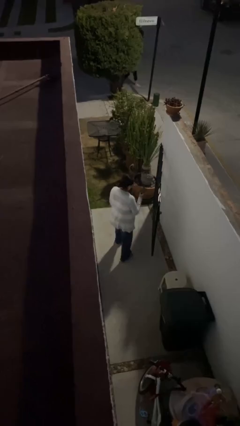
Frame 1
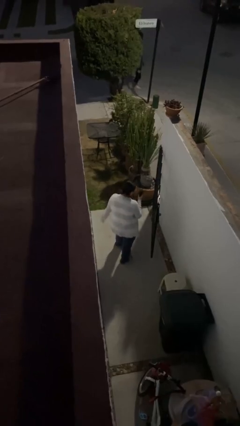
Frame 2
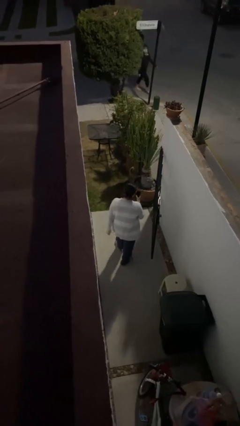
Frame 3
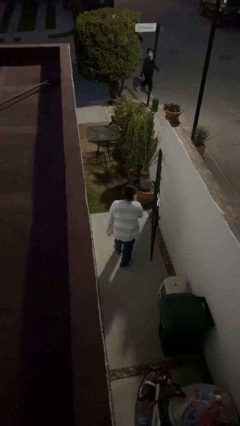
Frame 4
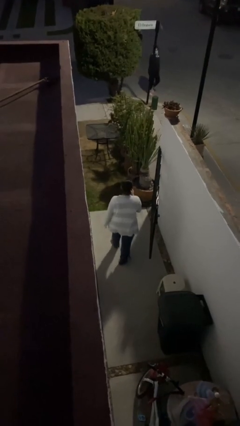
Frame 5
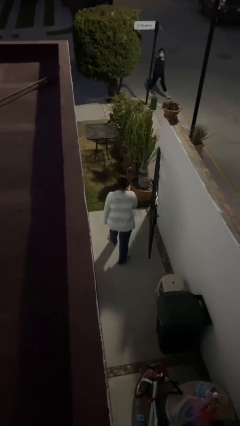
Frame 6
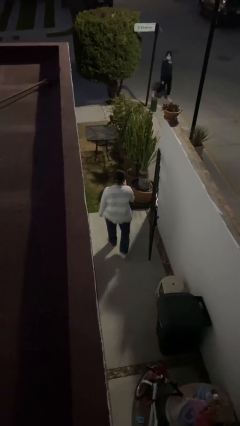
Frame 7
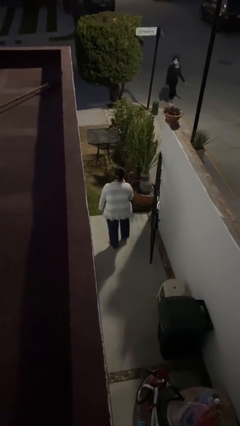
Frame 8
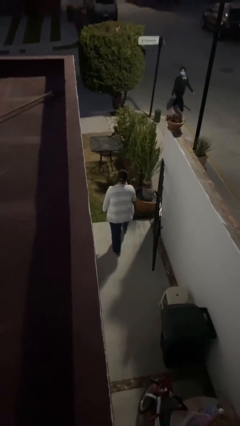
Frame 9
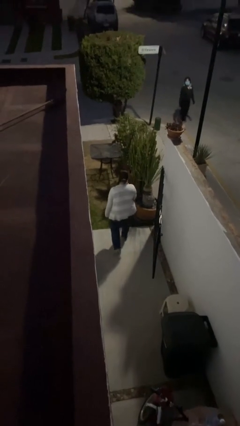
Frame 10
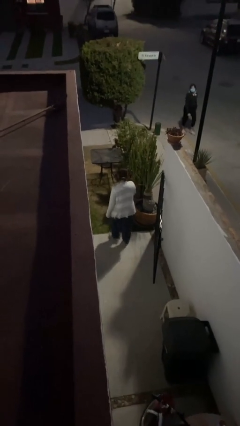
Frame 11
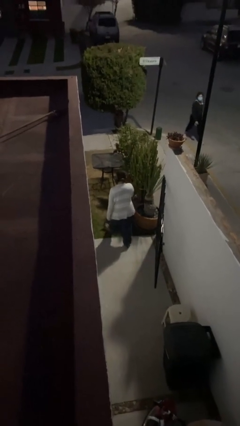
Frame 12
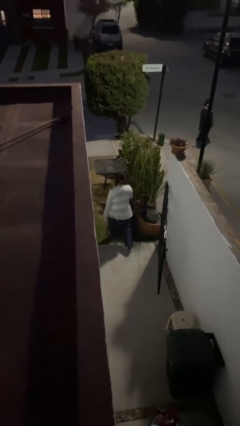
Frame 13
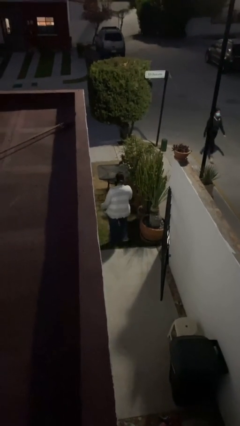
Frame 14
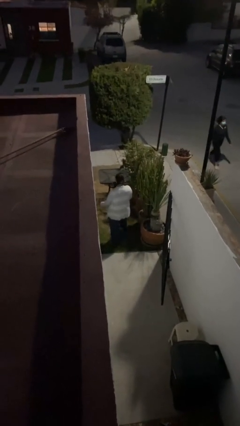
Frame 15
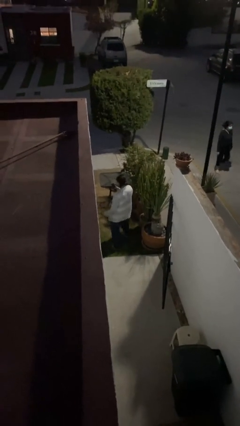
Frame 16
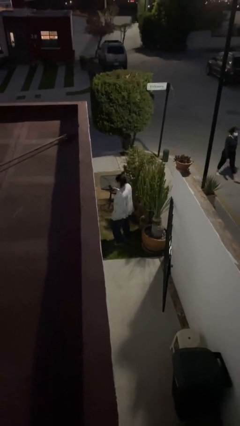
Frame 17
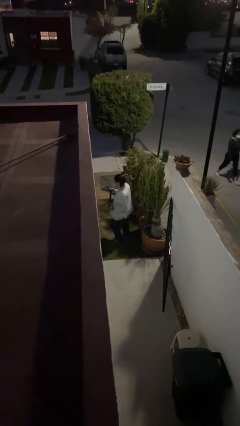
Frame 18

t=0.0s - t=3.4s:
person exits scene through structure

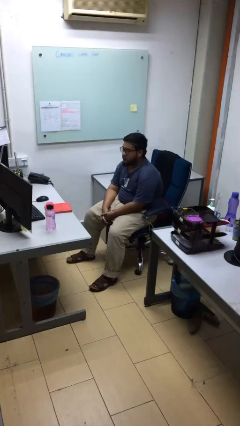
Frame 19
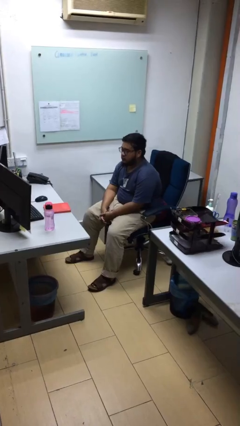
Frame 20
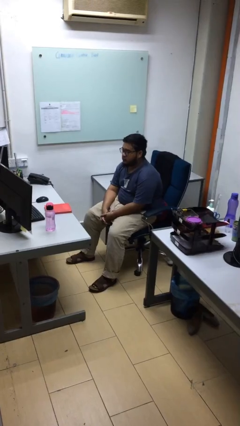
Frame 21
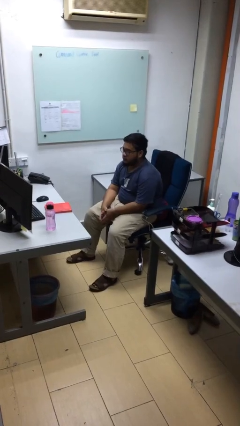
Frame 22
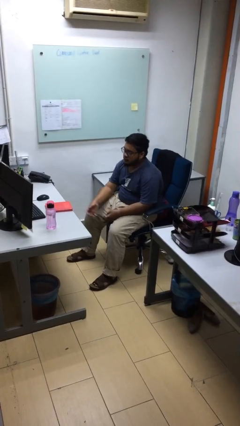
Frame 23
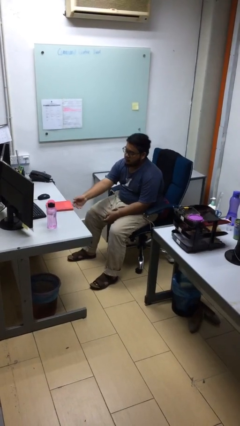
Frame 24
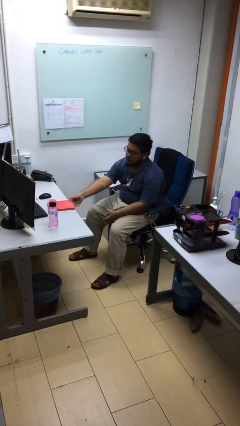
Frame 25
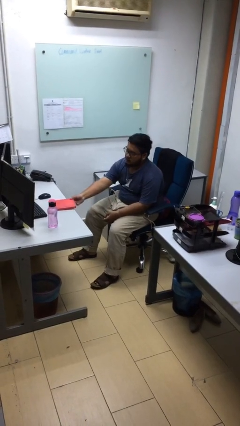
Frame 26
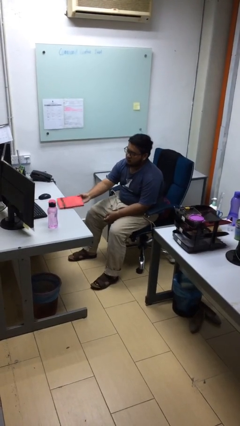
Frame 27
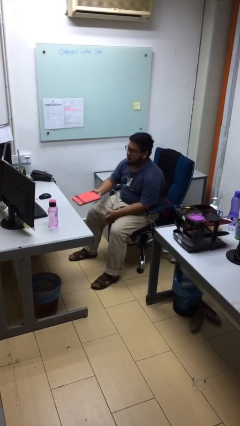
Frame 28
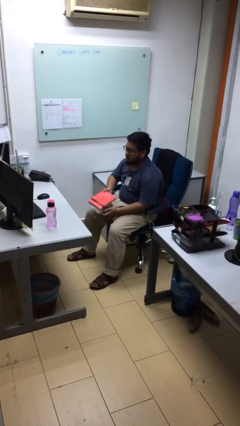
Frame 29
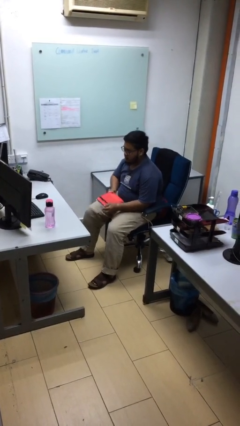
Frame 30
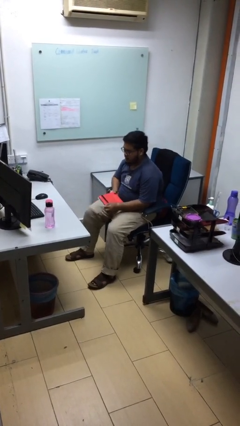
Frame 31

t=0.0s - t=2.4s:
person picks up object from table

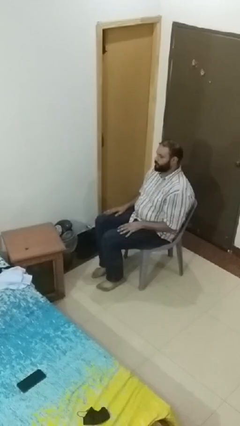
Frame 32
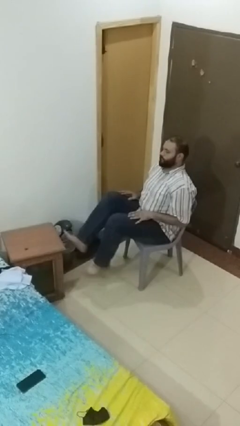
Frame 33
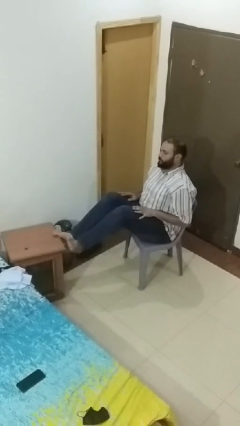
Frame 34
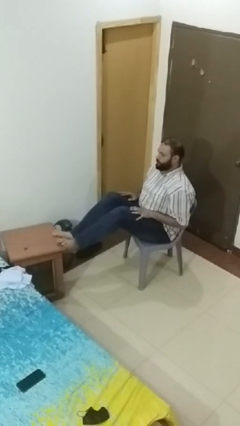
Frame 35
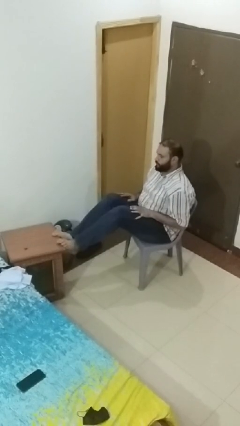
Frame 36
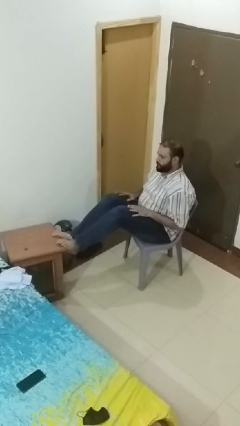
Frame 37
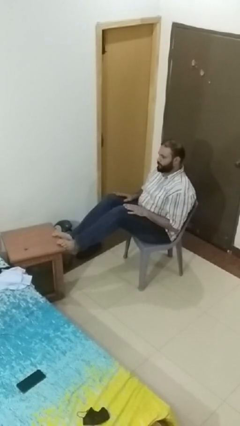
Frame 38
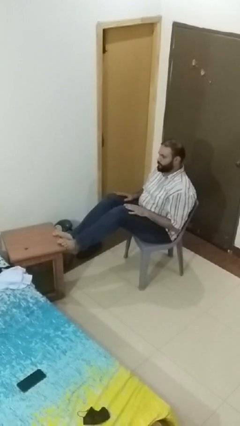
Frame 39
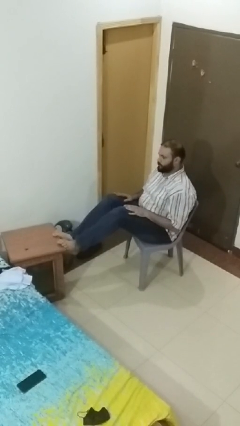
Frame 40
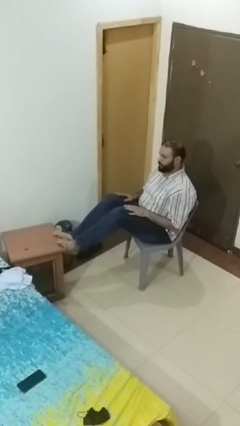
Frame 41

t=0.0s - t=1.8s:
person puts feet up

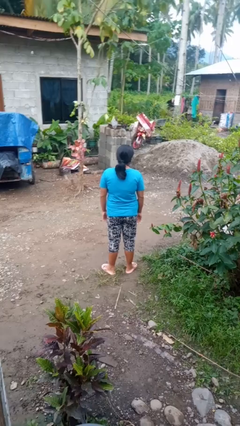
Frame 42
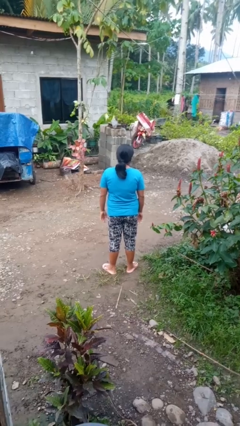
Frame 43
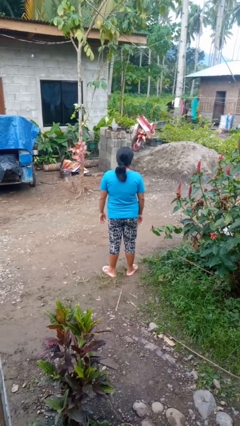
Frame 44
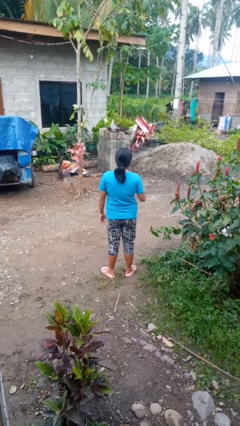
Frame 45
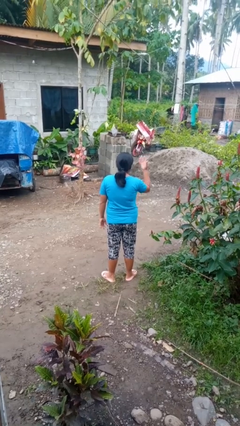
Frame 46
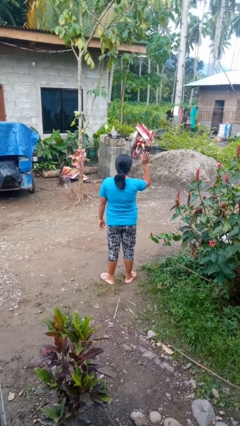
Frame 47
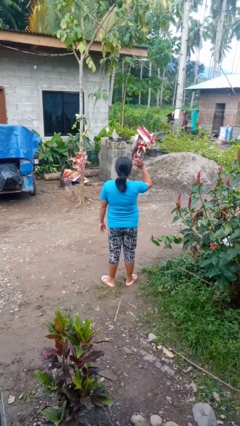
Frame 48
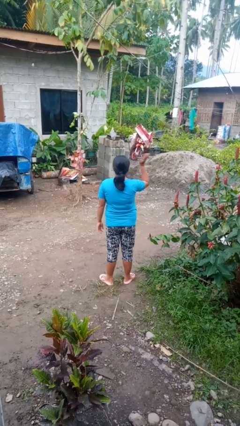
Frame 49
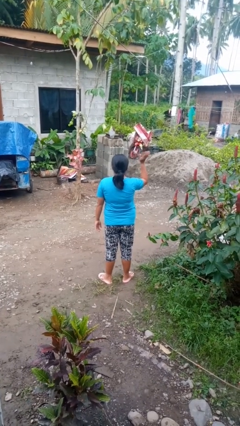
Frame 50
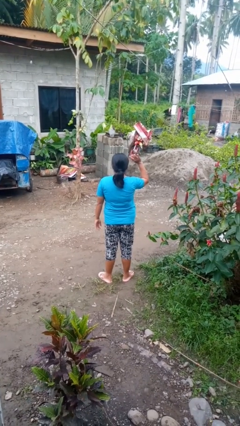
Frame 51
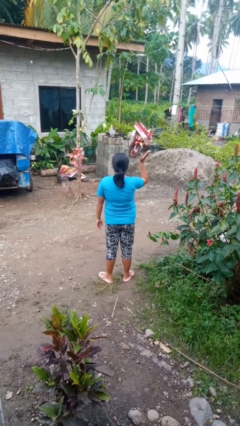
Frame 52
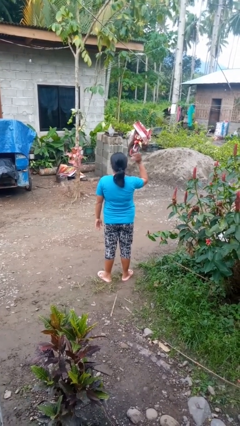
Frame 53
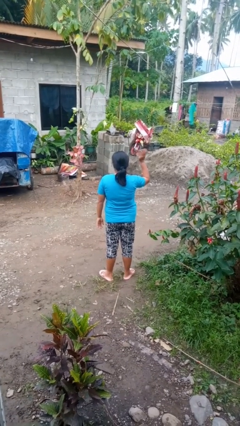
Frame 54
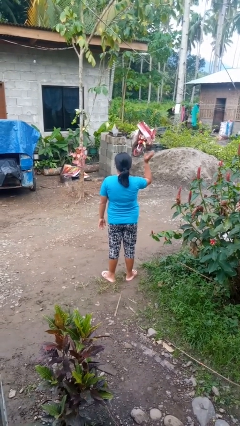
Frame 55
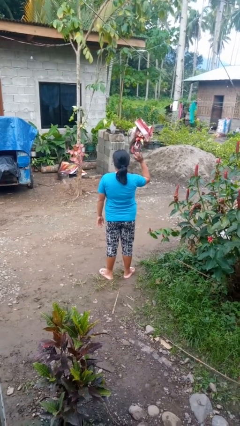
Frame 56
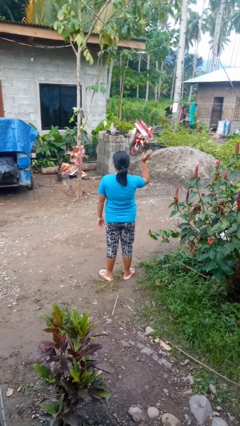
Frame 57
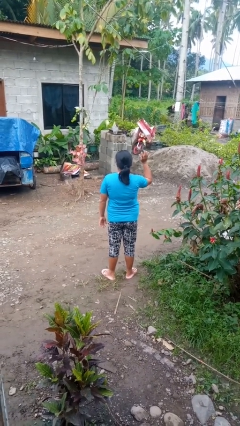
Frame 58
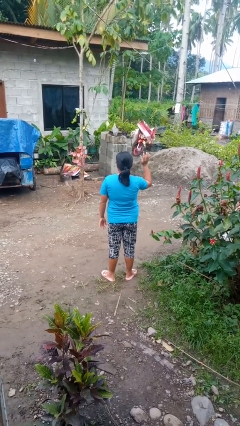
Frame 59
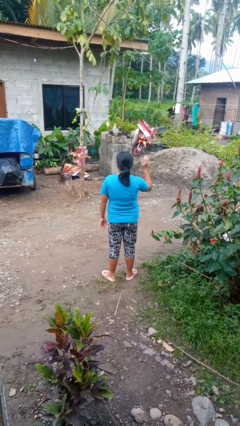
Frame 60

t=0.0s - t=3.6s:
person waves at person

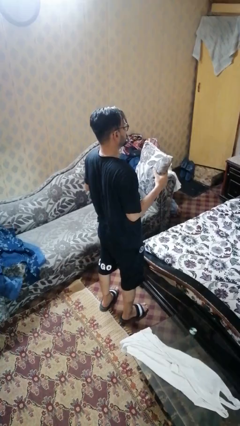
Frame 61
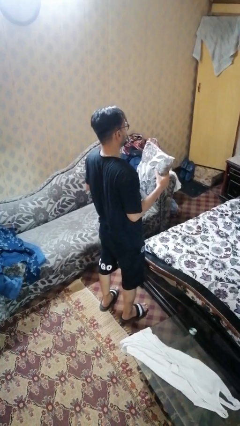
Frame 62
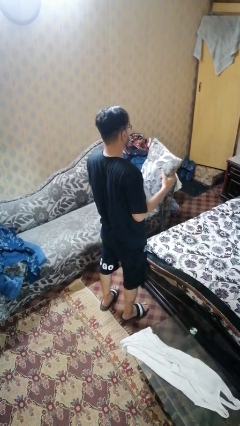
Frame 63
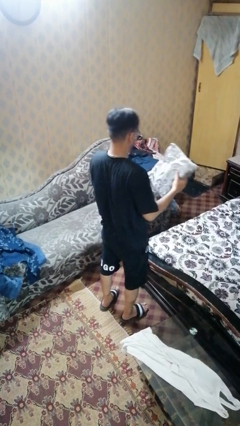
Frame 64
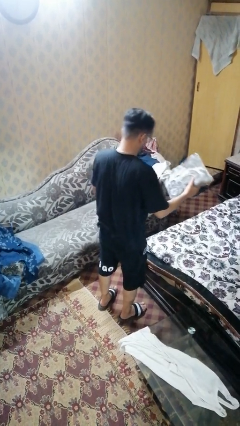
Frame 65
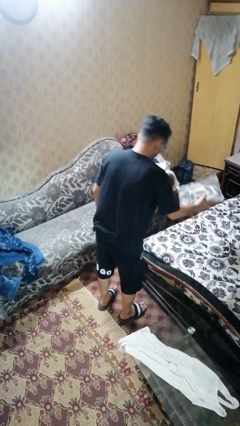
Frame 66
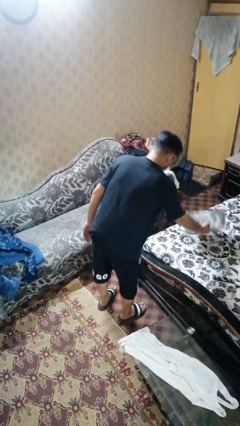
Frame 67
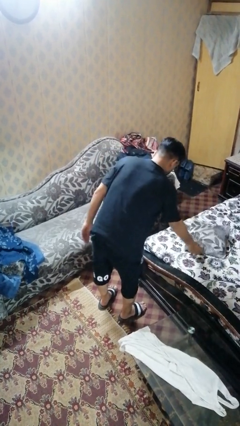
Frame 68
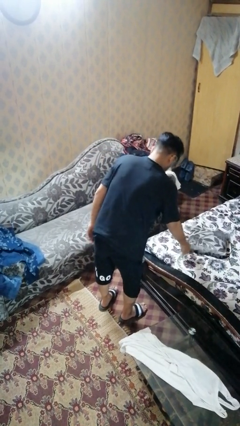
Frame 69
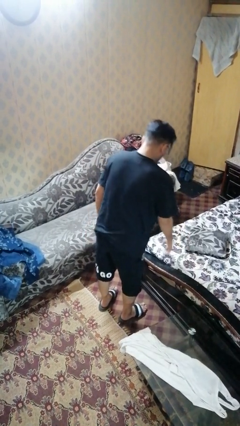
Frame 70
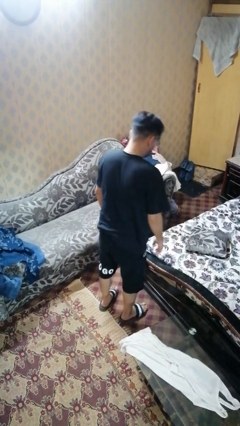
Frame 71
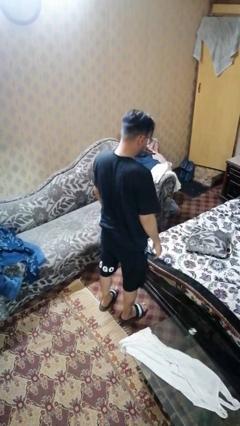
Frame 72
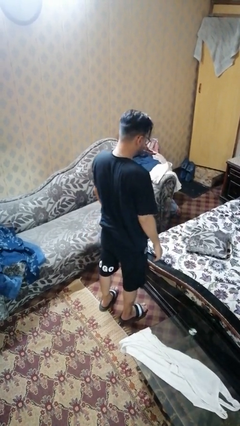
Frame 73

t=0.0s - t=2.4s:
person puts down object on bed

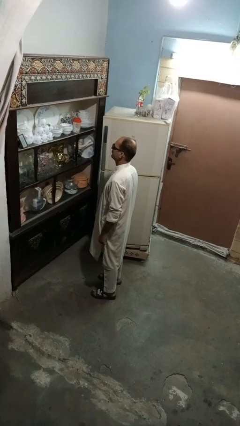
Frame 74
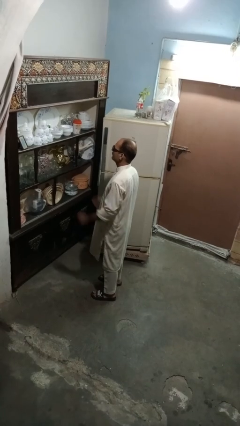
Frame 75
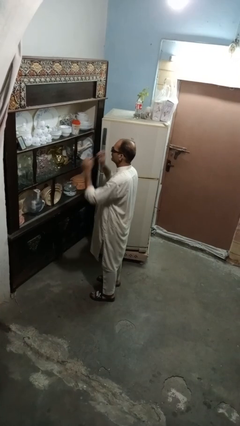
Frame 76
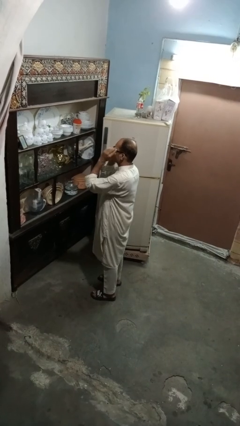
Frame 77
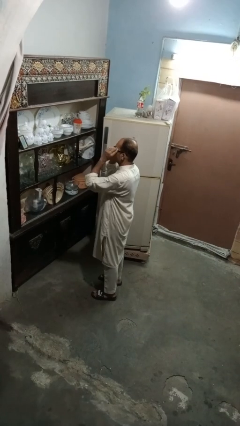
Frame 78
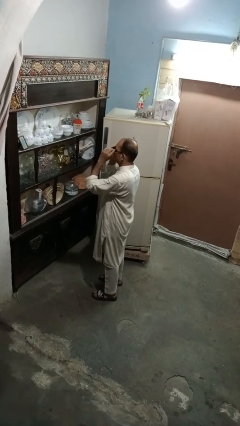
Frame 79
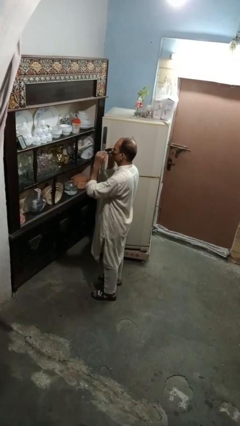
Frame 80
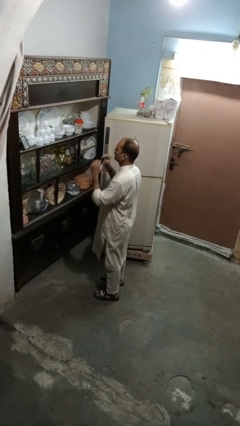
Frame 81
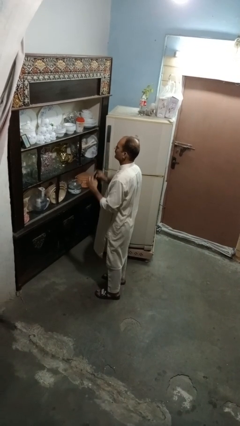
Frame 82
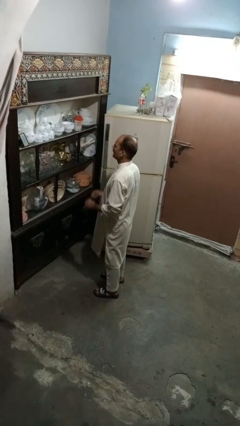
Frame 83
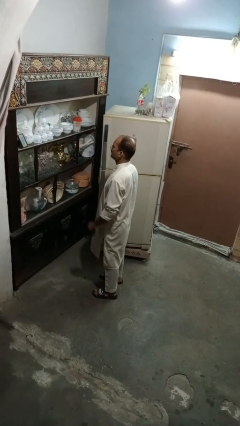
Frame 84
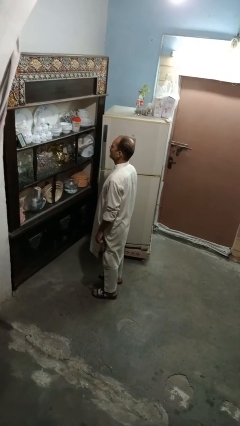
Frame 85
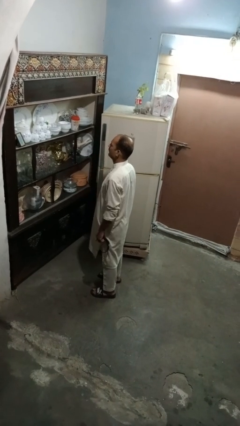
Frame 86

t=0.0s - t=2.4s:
person takes off sunglasses

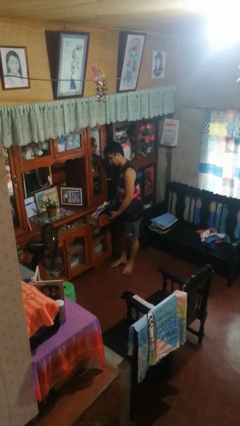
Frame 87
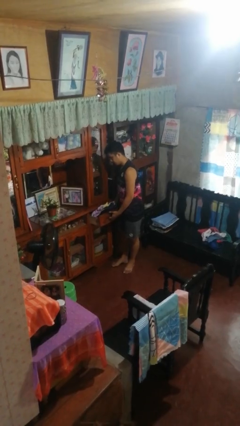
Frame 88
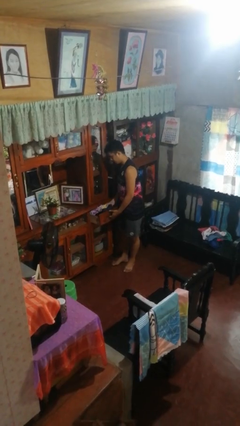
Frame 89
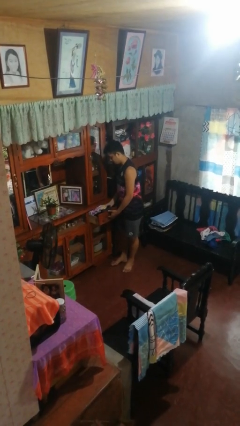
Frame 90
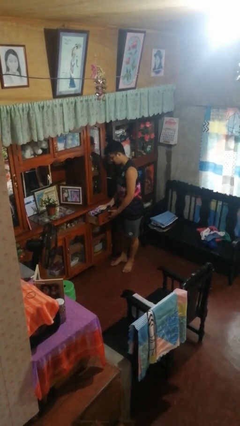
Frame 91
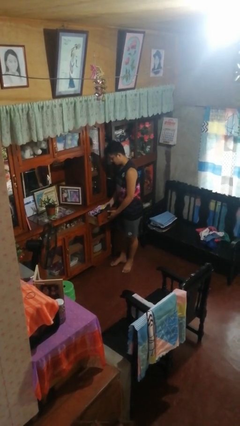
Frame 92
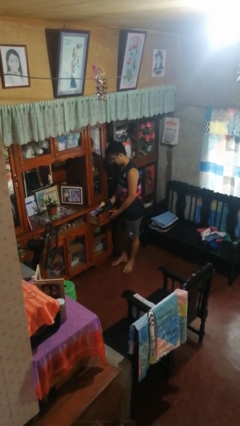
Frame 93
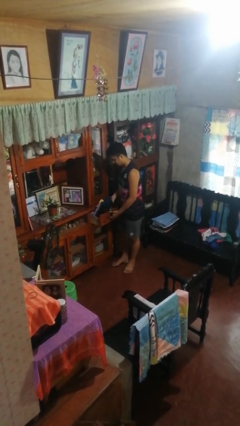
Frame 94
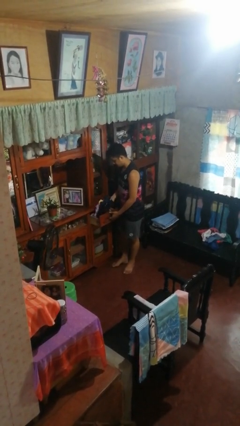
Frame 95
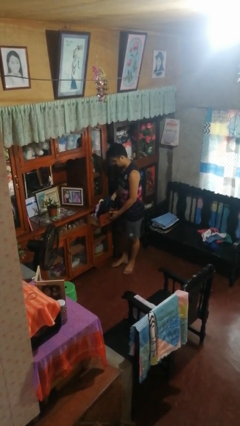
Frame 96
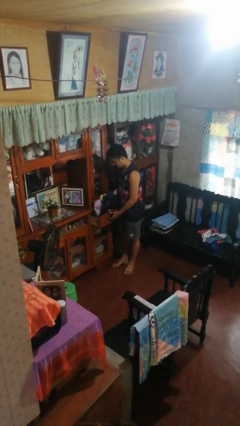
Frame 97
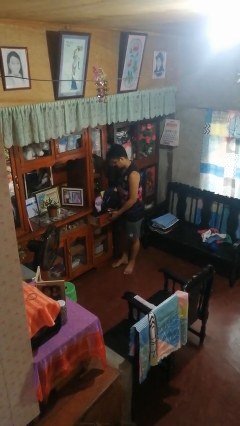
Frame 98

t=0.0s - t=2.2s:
person takes clothes from dresser
